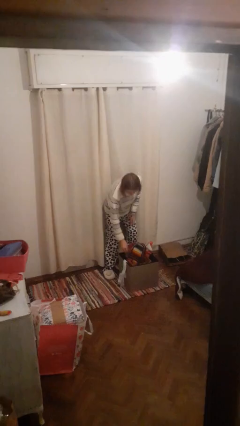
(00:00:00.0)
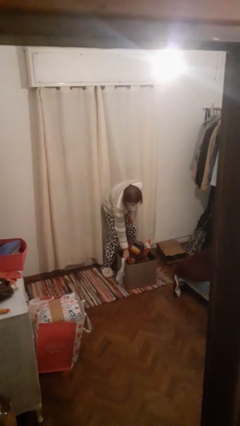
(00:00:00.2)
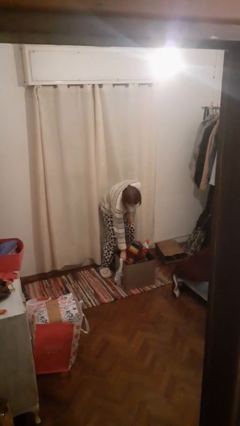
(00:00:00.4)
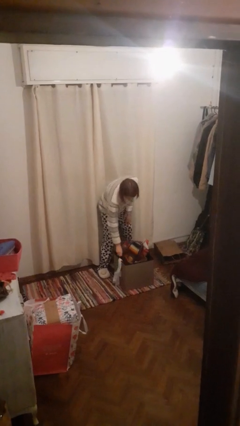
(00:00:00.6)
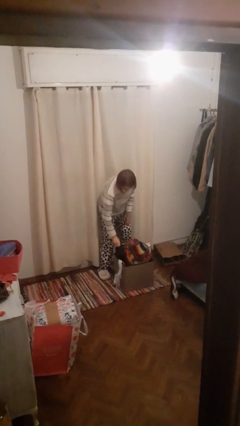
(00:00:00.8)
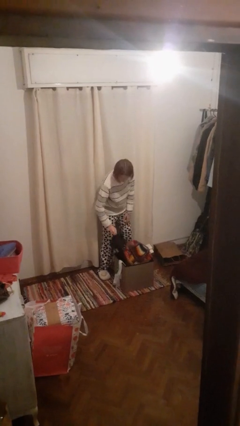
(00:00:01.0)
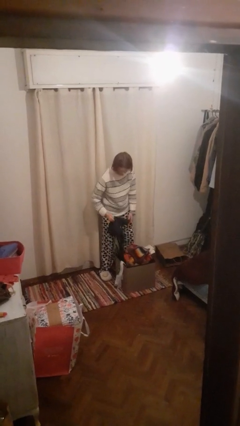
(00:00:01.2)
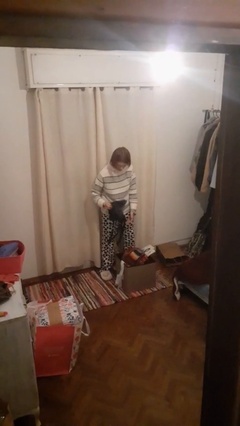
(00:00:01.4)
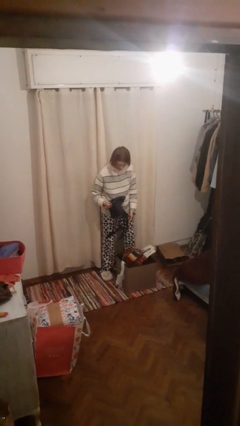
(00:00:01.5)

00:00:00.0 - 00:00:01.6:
person takes object from basket

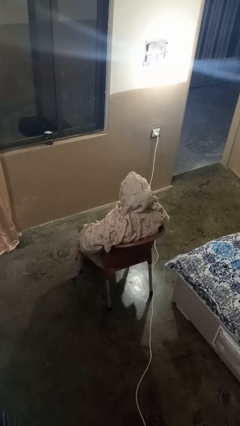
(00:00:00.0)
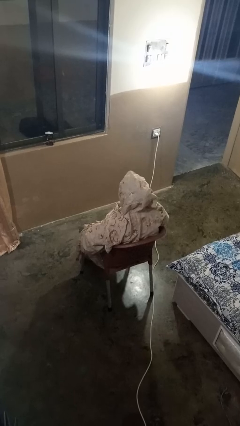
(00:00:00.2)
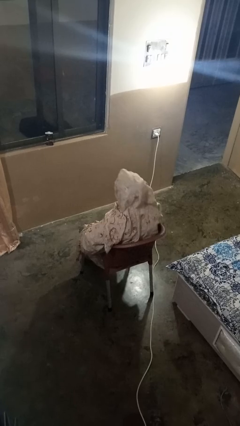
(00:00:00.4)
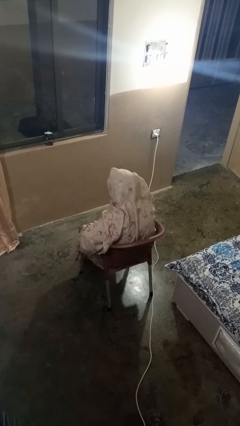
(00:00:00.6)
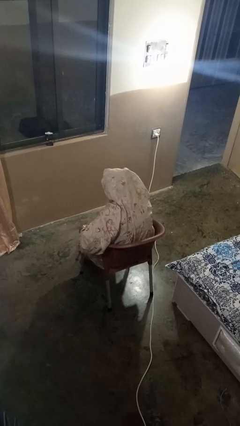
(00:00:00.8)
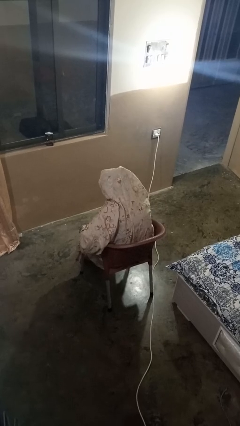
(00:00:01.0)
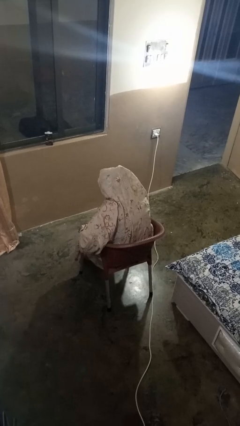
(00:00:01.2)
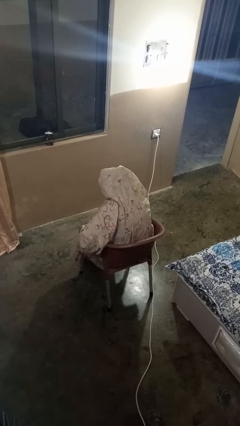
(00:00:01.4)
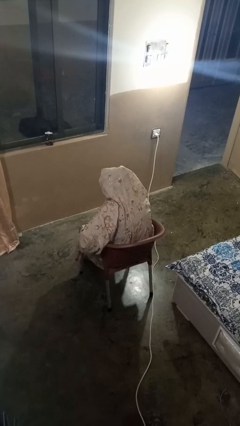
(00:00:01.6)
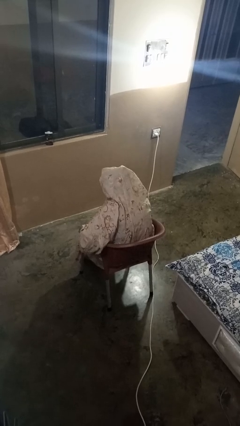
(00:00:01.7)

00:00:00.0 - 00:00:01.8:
person looks at hands in lap

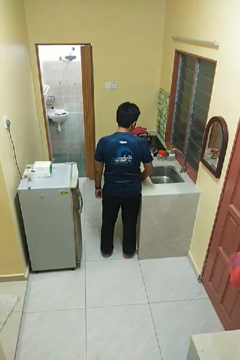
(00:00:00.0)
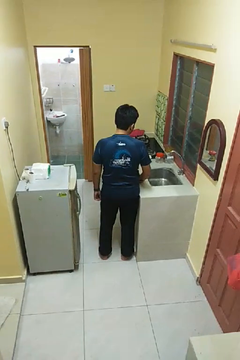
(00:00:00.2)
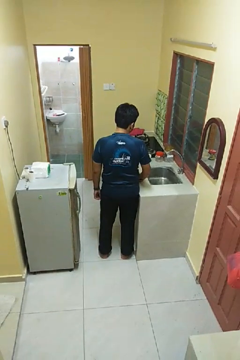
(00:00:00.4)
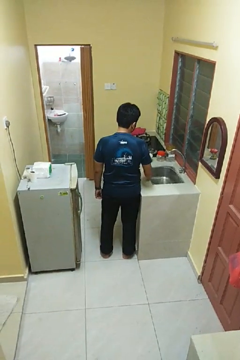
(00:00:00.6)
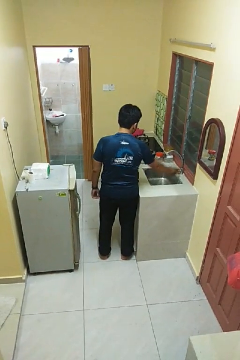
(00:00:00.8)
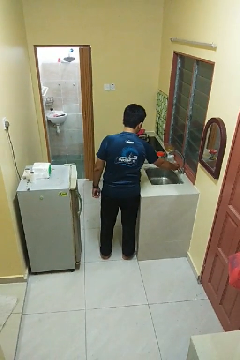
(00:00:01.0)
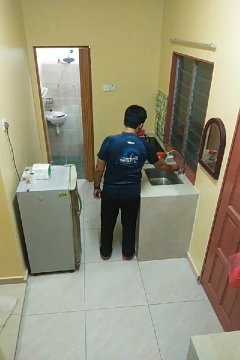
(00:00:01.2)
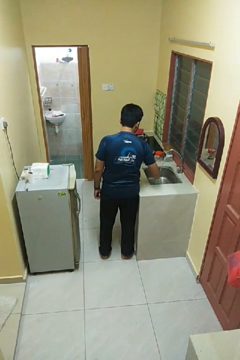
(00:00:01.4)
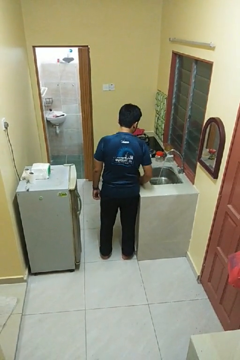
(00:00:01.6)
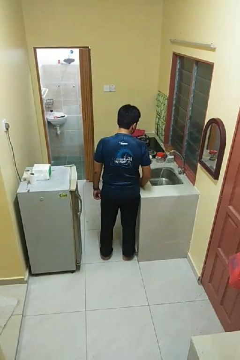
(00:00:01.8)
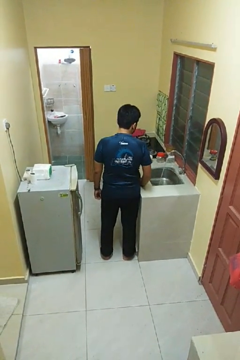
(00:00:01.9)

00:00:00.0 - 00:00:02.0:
person turns on faucet

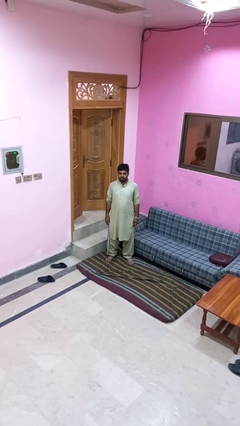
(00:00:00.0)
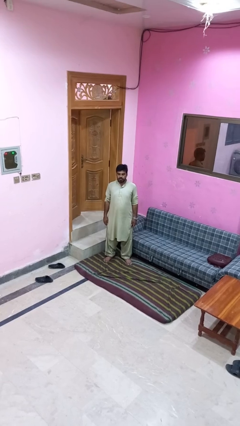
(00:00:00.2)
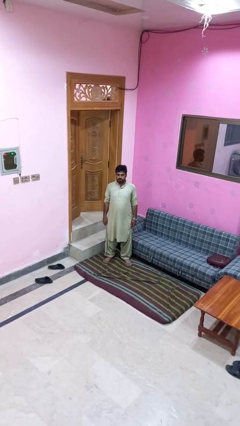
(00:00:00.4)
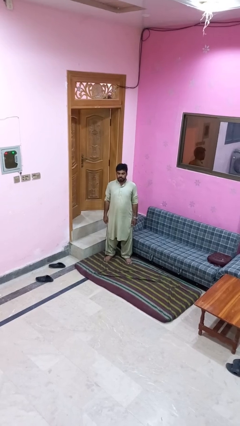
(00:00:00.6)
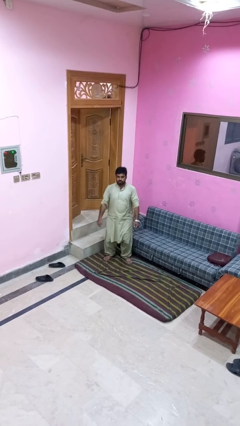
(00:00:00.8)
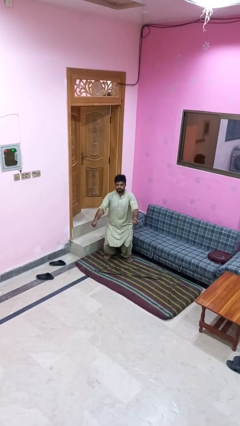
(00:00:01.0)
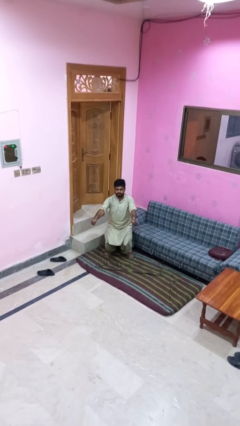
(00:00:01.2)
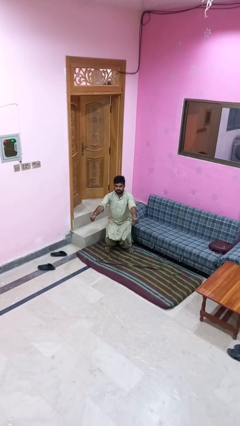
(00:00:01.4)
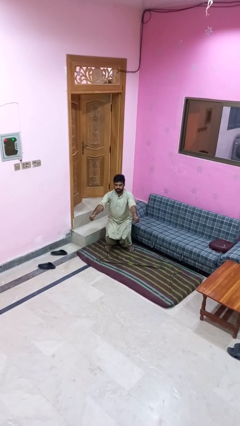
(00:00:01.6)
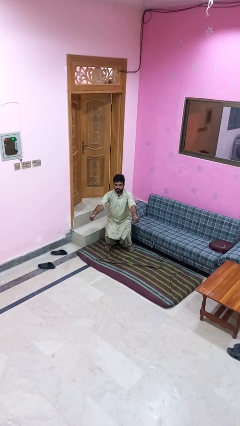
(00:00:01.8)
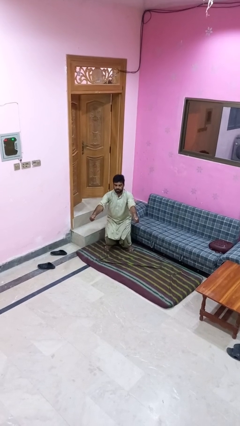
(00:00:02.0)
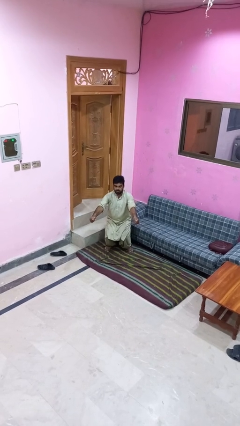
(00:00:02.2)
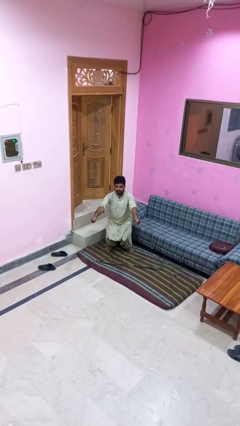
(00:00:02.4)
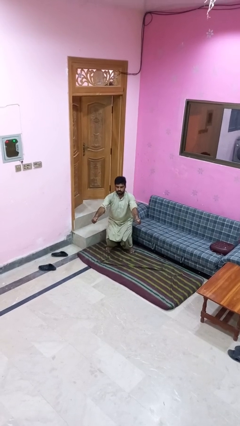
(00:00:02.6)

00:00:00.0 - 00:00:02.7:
person squats

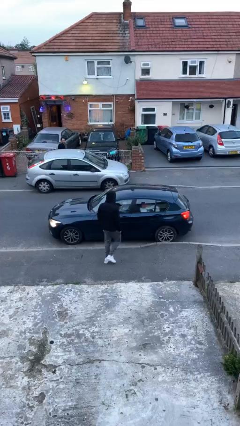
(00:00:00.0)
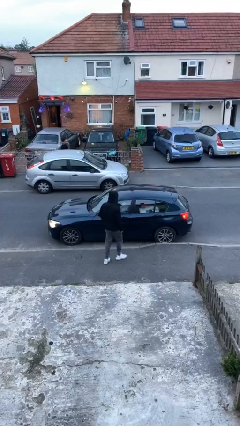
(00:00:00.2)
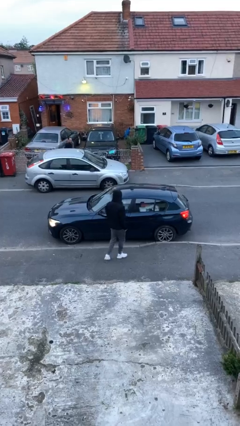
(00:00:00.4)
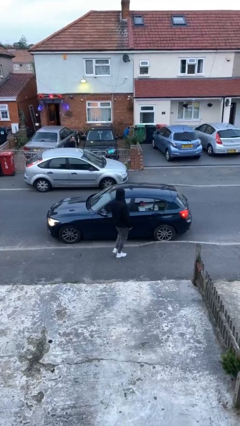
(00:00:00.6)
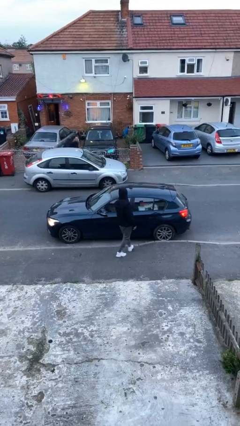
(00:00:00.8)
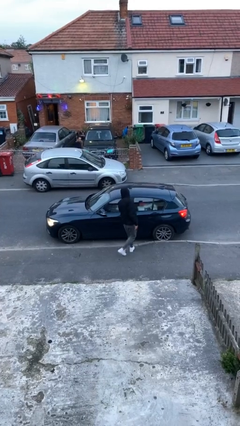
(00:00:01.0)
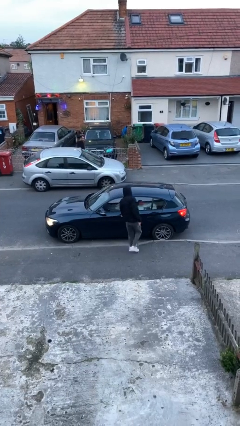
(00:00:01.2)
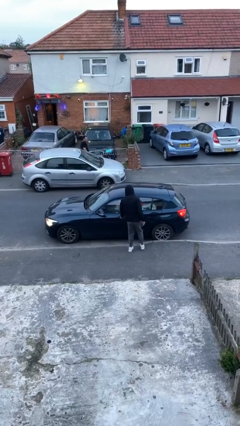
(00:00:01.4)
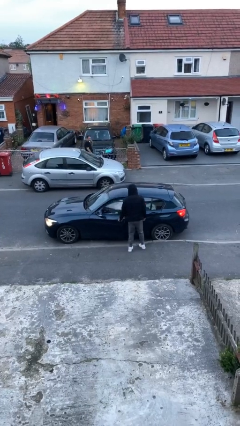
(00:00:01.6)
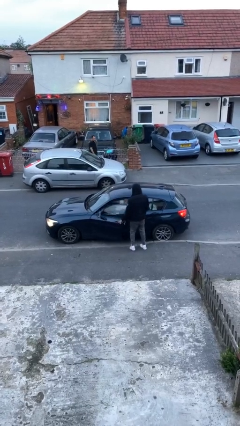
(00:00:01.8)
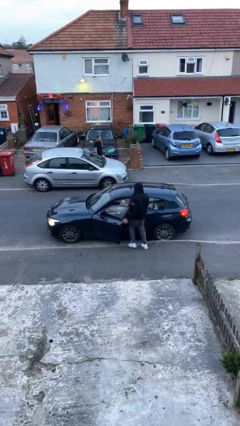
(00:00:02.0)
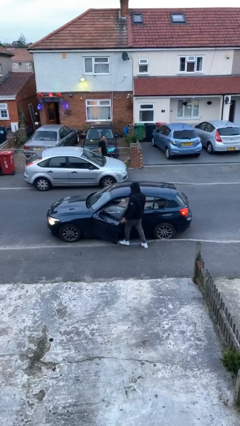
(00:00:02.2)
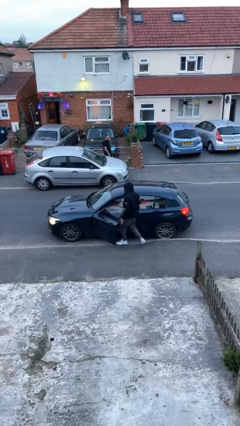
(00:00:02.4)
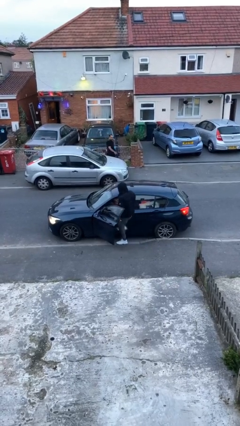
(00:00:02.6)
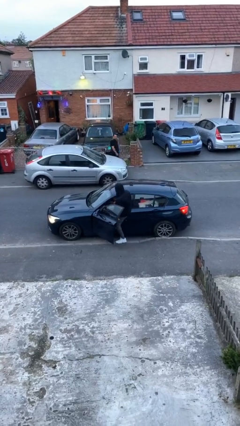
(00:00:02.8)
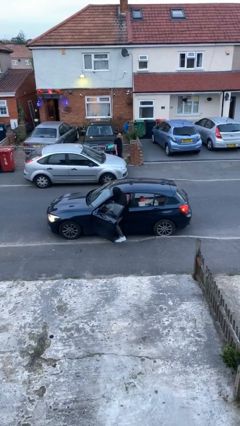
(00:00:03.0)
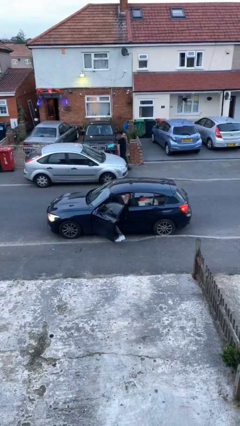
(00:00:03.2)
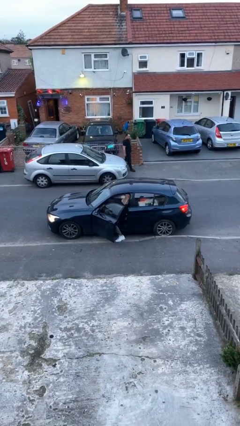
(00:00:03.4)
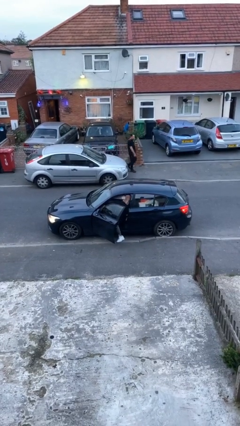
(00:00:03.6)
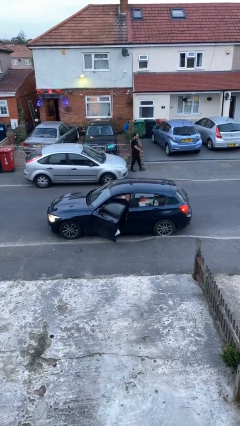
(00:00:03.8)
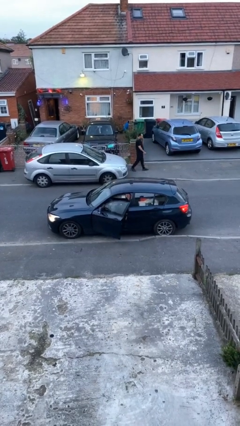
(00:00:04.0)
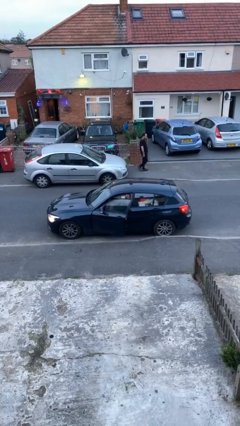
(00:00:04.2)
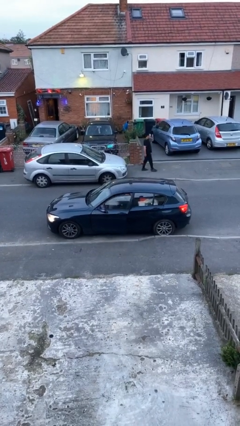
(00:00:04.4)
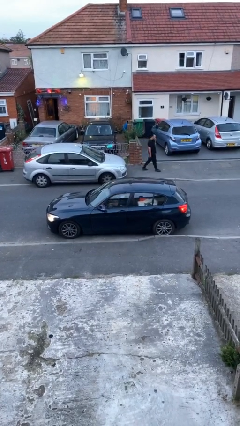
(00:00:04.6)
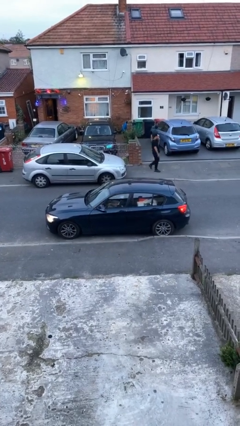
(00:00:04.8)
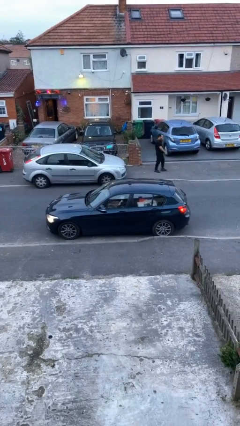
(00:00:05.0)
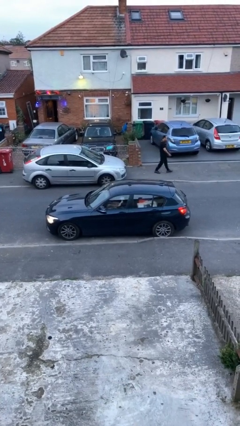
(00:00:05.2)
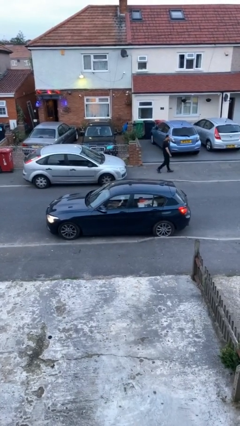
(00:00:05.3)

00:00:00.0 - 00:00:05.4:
car picks up person

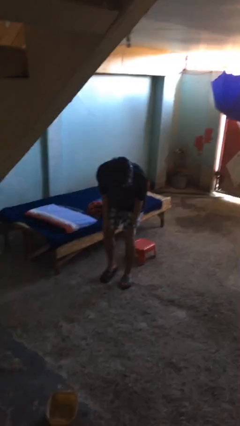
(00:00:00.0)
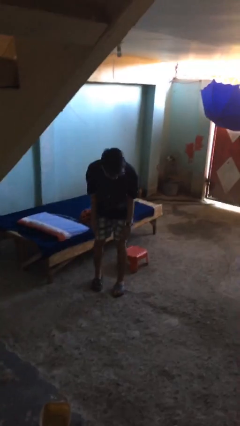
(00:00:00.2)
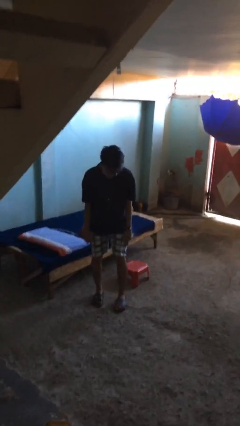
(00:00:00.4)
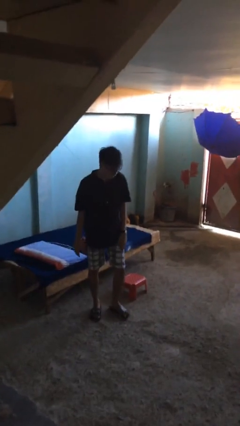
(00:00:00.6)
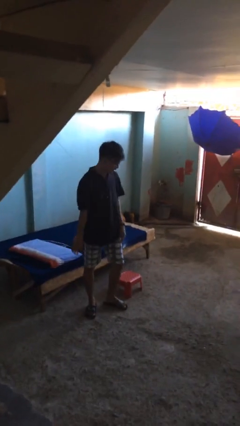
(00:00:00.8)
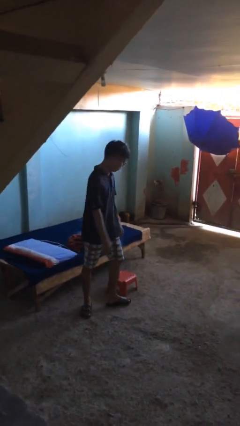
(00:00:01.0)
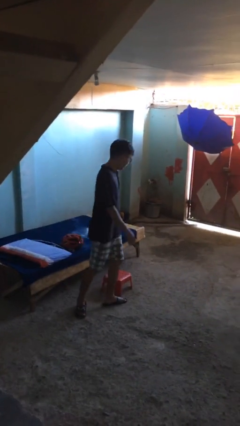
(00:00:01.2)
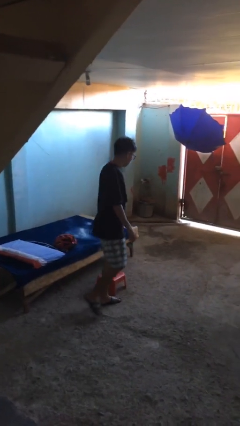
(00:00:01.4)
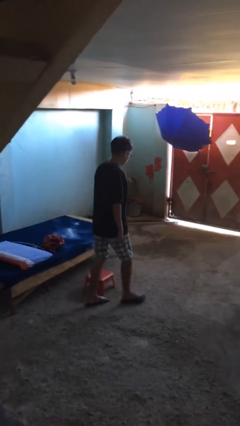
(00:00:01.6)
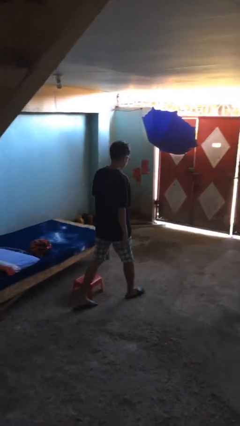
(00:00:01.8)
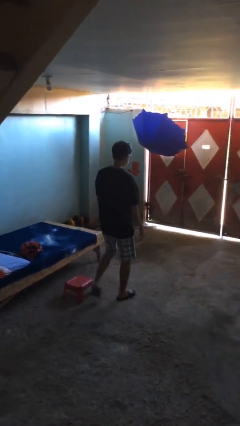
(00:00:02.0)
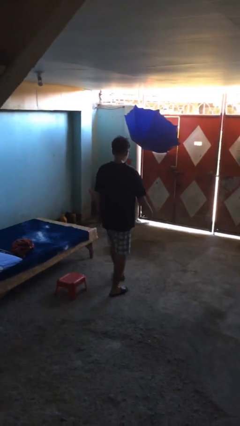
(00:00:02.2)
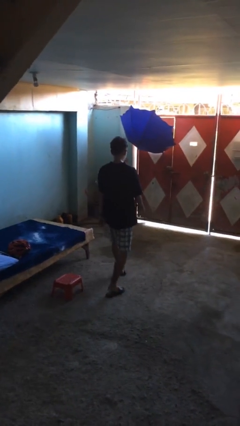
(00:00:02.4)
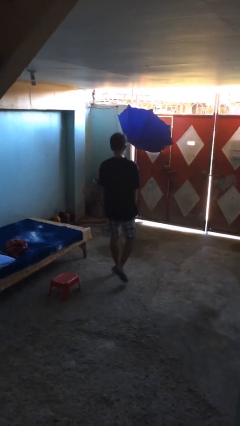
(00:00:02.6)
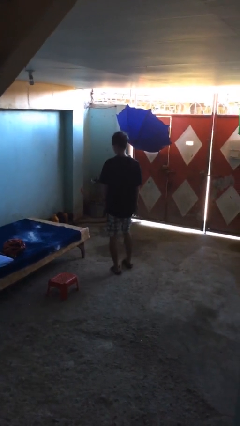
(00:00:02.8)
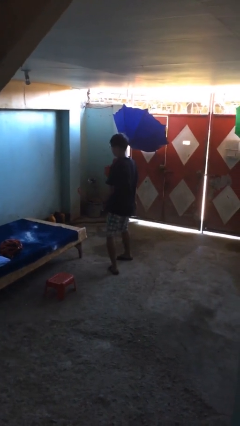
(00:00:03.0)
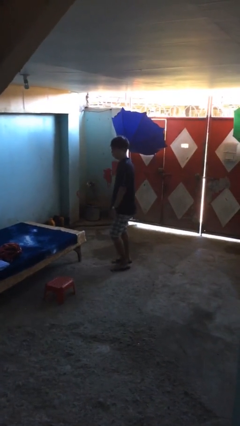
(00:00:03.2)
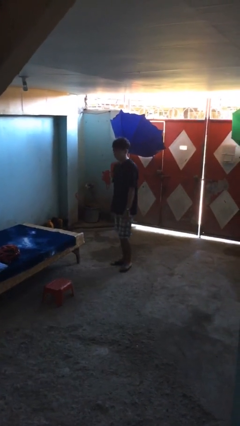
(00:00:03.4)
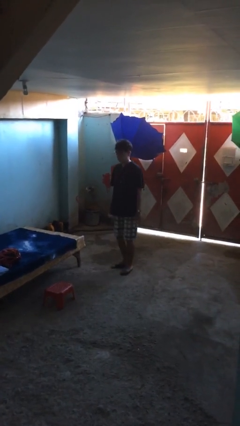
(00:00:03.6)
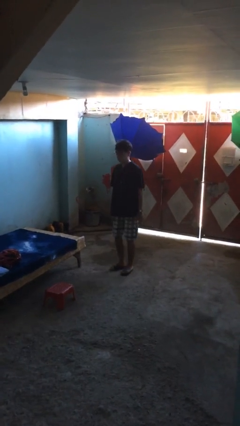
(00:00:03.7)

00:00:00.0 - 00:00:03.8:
person stands up from floor

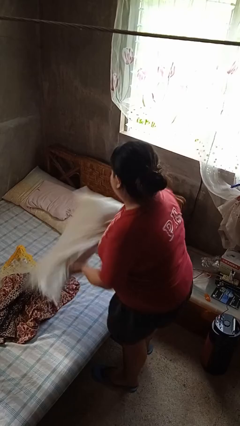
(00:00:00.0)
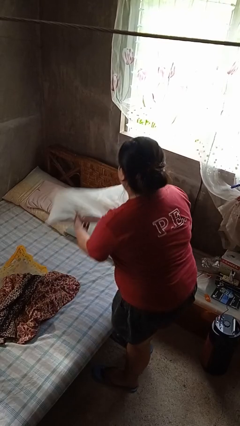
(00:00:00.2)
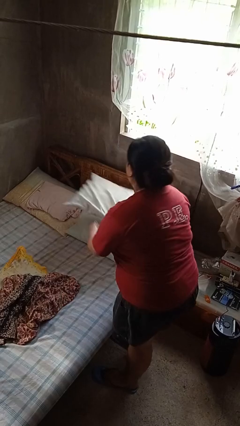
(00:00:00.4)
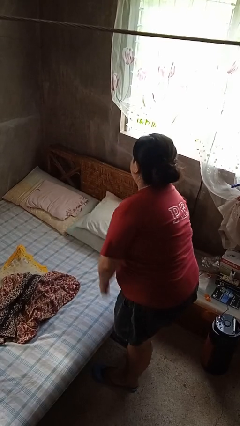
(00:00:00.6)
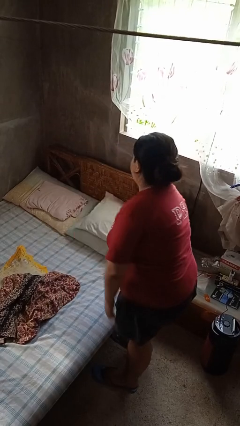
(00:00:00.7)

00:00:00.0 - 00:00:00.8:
person makes bed
